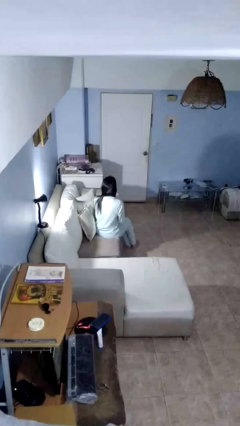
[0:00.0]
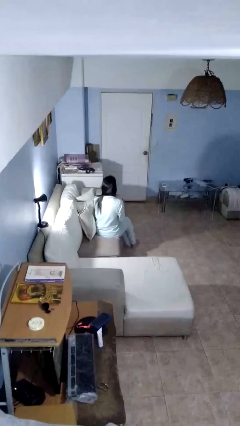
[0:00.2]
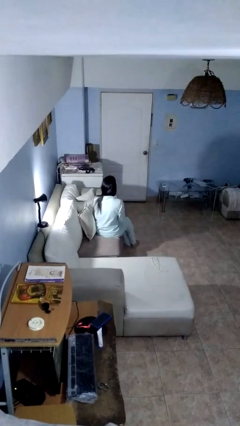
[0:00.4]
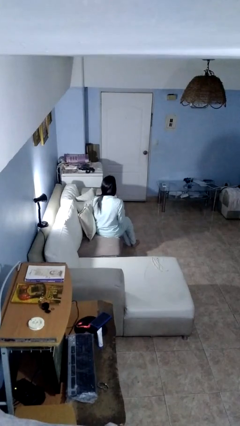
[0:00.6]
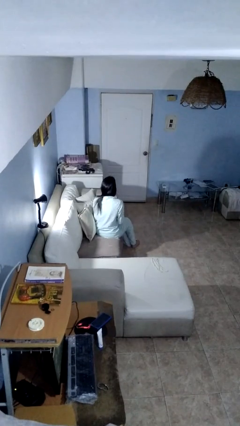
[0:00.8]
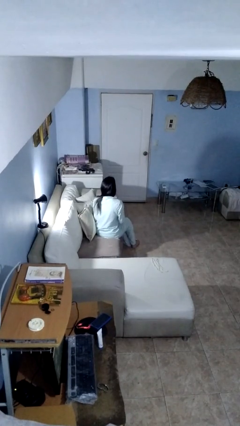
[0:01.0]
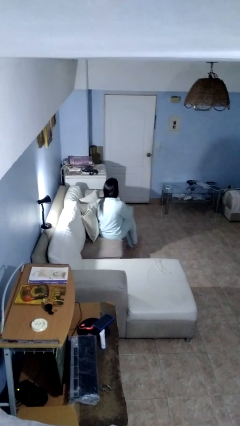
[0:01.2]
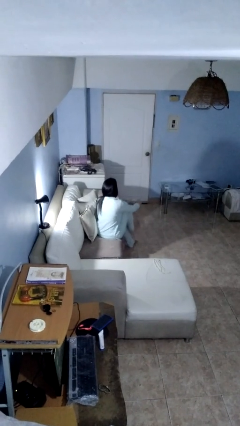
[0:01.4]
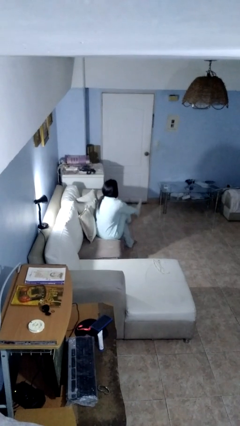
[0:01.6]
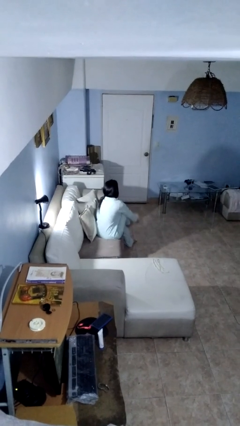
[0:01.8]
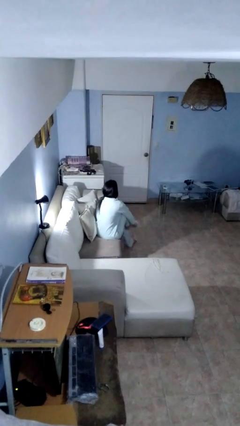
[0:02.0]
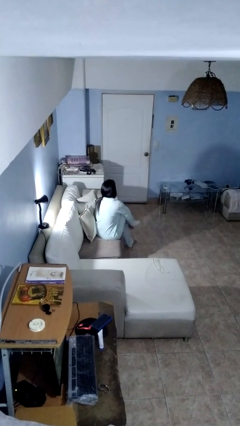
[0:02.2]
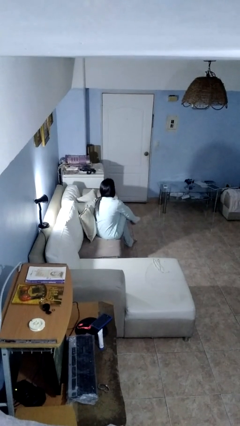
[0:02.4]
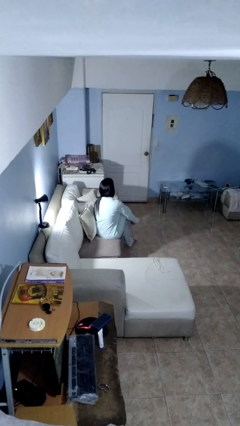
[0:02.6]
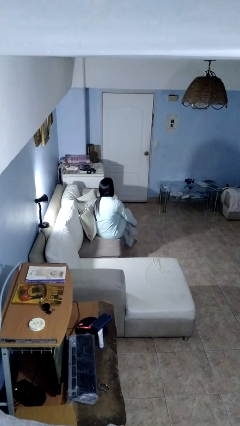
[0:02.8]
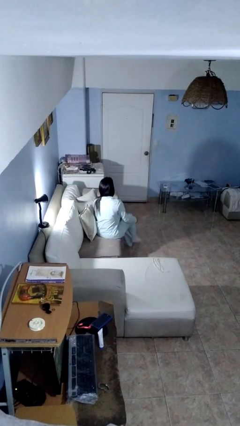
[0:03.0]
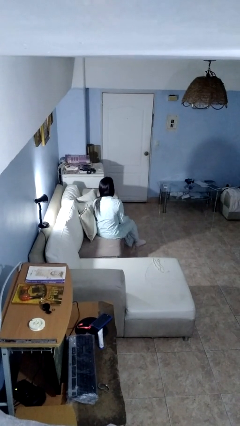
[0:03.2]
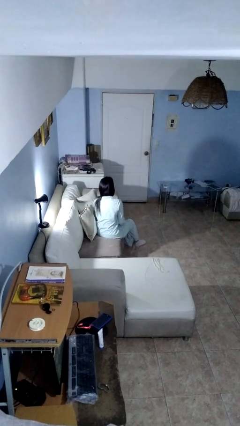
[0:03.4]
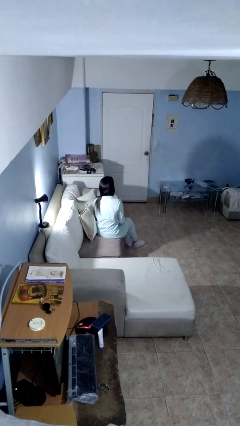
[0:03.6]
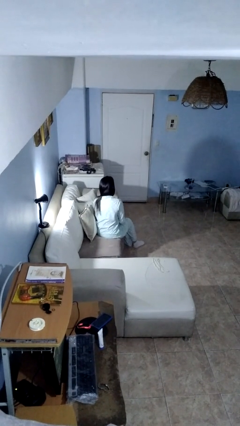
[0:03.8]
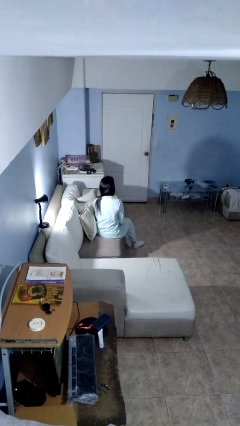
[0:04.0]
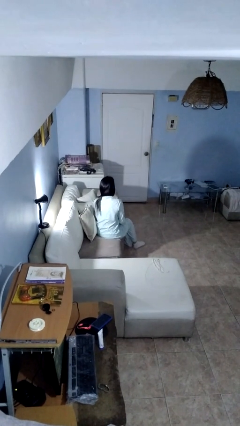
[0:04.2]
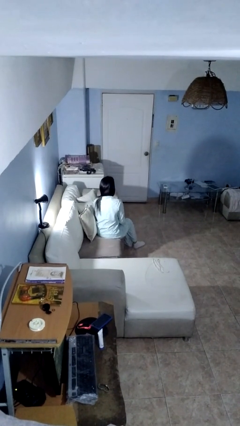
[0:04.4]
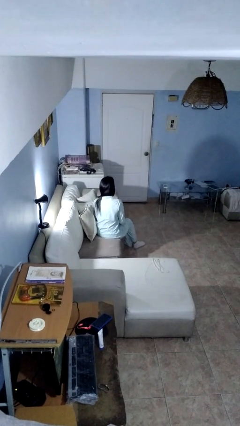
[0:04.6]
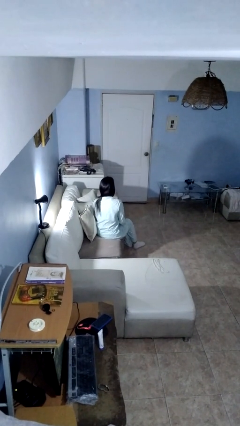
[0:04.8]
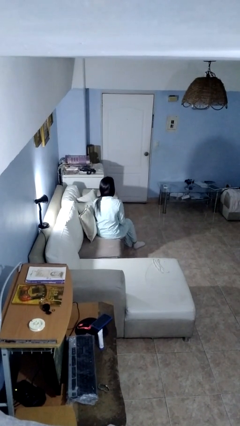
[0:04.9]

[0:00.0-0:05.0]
person puts on socks

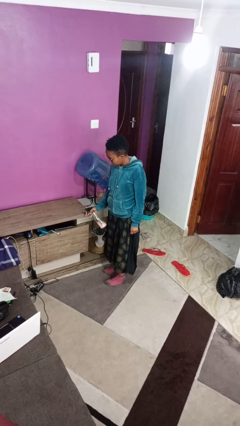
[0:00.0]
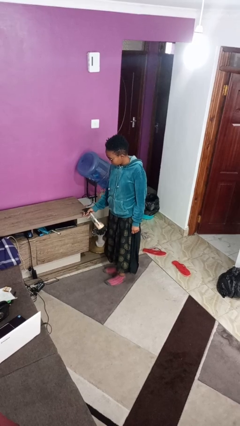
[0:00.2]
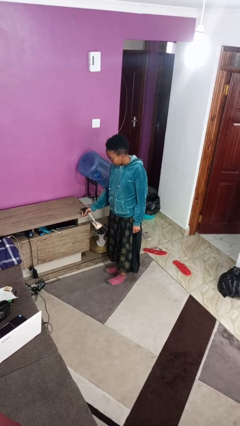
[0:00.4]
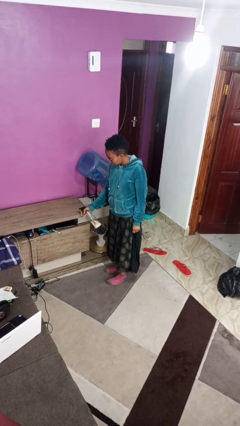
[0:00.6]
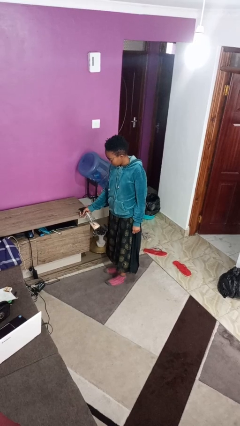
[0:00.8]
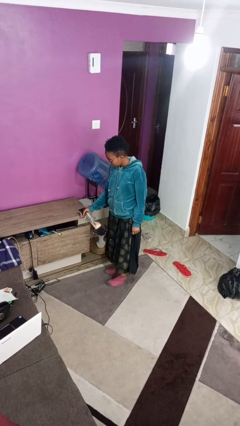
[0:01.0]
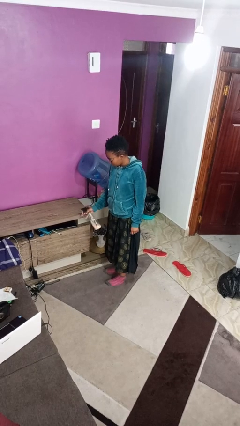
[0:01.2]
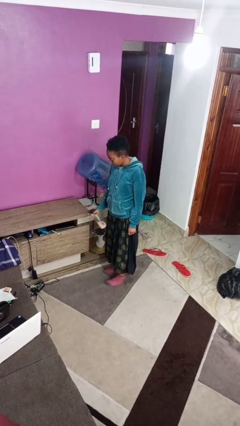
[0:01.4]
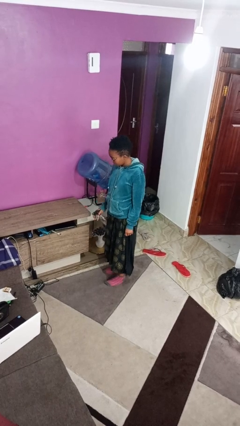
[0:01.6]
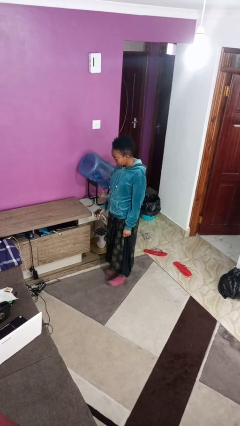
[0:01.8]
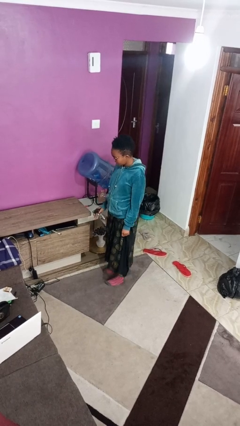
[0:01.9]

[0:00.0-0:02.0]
person sprays from bottle

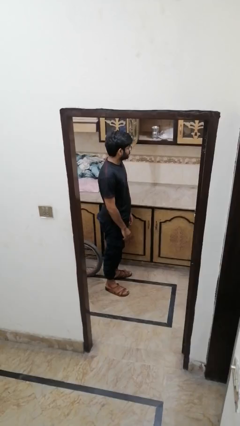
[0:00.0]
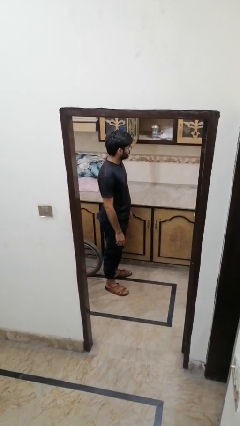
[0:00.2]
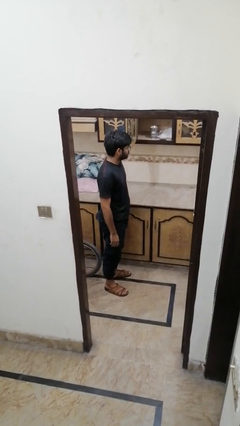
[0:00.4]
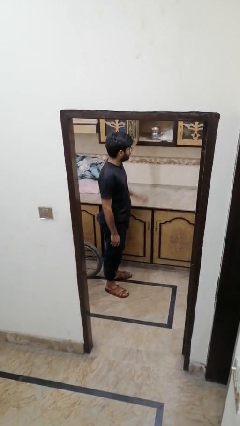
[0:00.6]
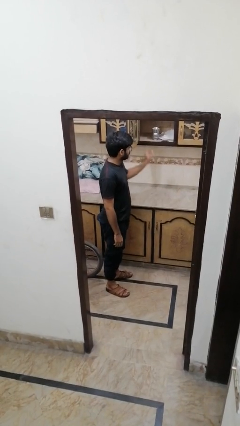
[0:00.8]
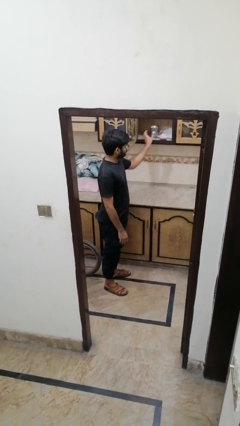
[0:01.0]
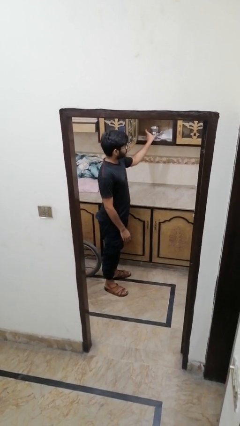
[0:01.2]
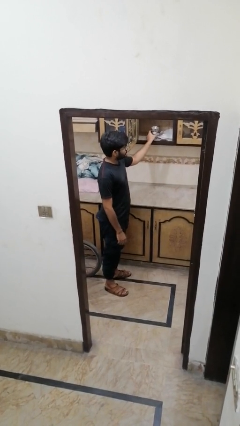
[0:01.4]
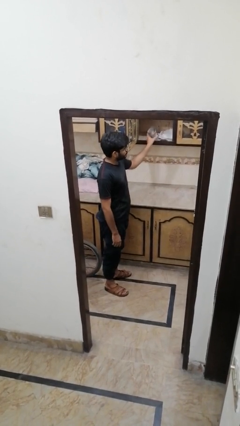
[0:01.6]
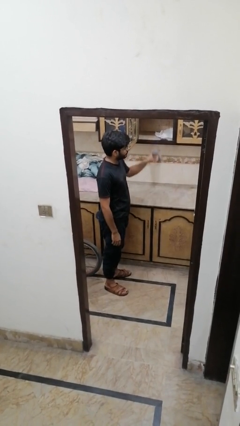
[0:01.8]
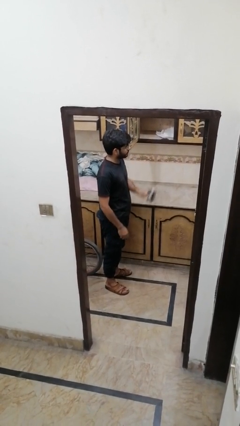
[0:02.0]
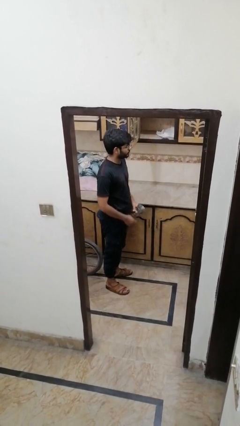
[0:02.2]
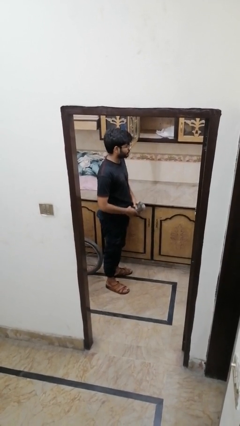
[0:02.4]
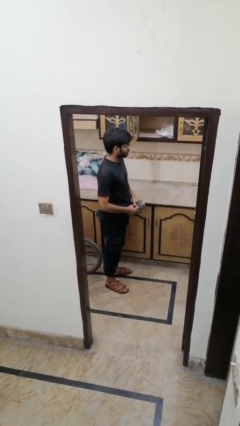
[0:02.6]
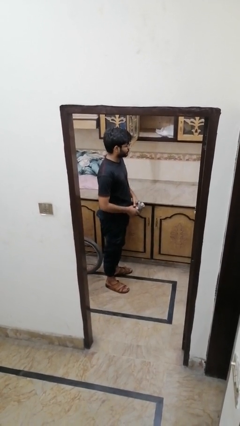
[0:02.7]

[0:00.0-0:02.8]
person picks up object from cabinet

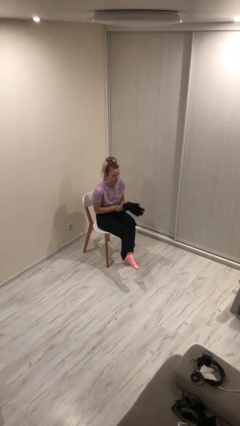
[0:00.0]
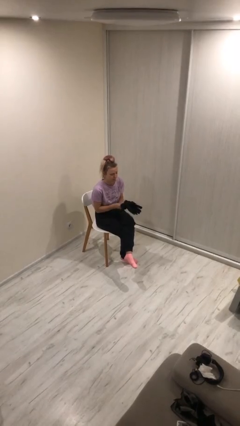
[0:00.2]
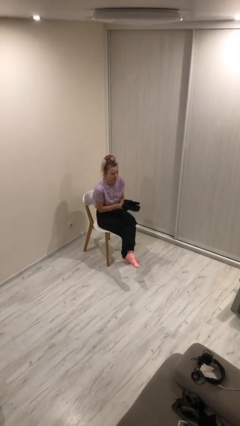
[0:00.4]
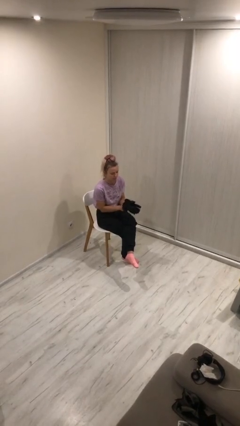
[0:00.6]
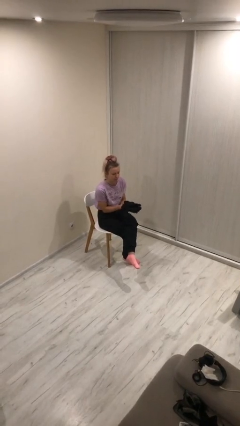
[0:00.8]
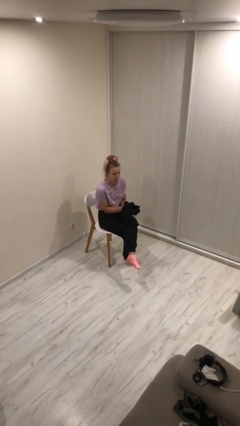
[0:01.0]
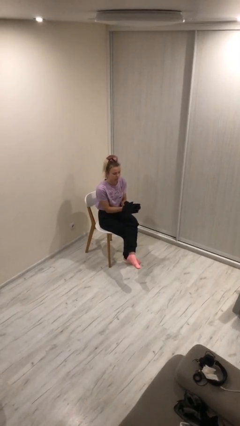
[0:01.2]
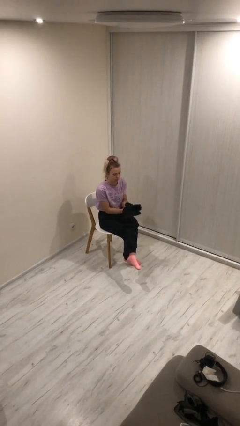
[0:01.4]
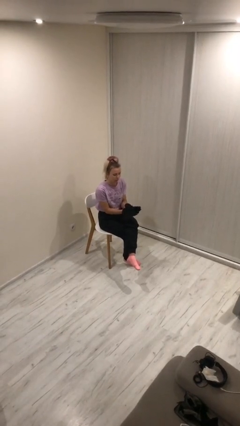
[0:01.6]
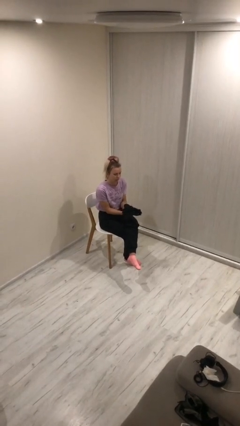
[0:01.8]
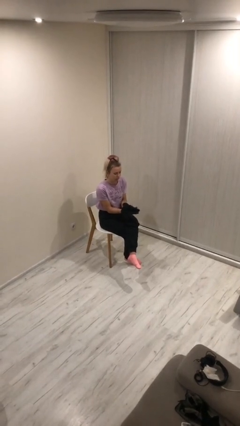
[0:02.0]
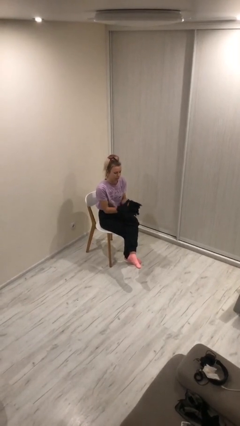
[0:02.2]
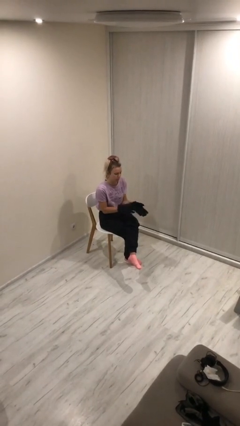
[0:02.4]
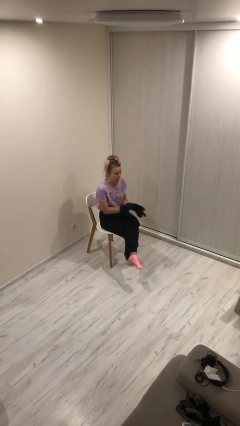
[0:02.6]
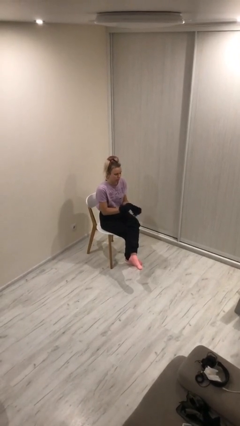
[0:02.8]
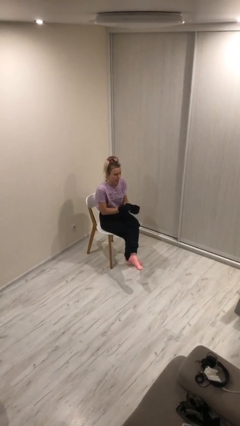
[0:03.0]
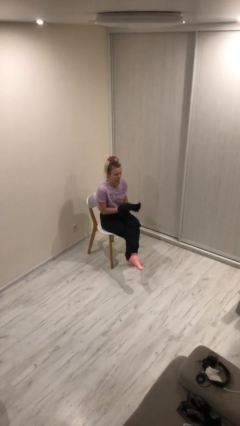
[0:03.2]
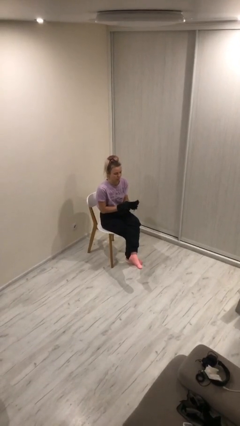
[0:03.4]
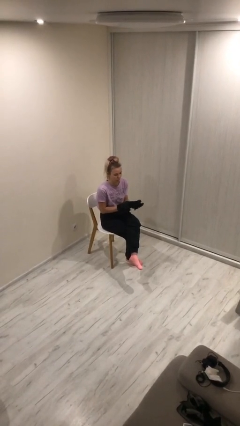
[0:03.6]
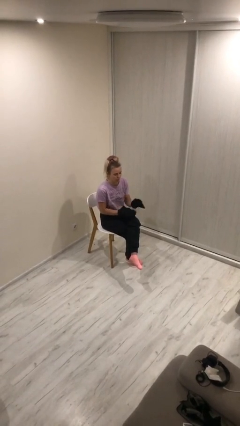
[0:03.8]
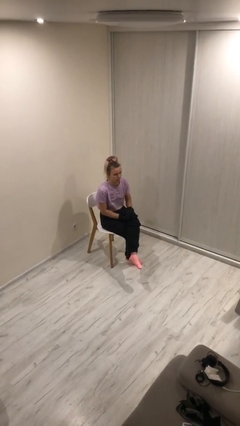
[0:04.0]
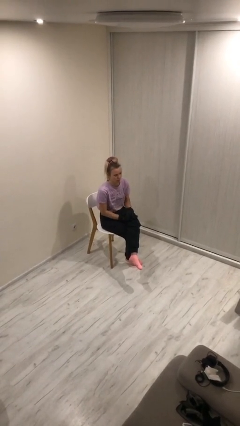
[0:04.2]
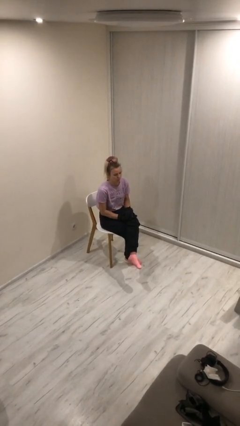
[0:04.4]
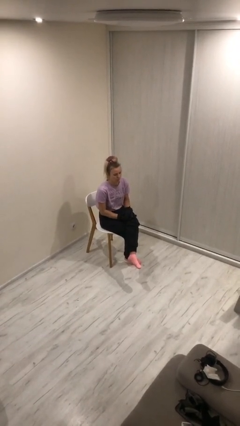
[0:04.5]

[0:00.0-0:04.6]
person puts on gloves

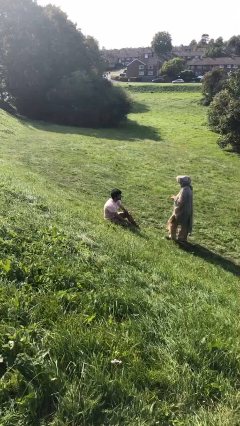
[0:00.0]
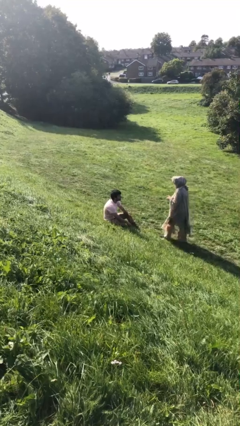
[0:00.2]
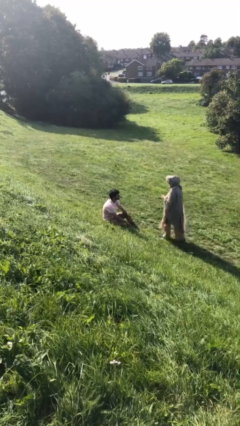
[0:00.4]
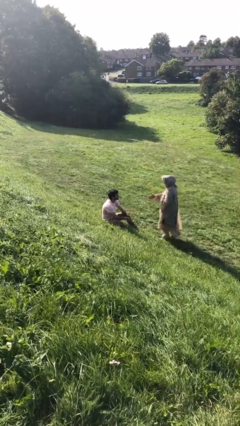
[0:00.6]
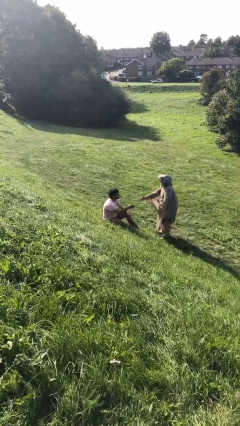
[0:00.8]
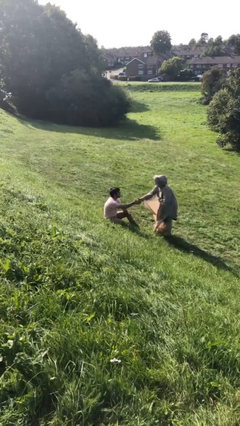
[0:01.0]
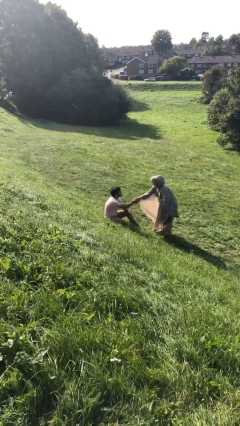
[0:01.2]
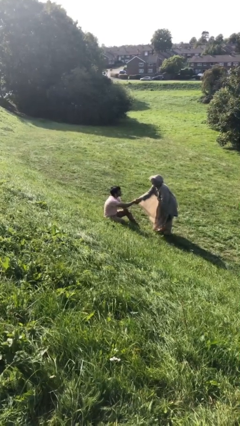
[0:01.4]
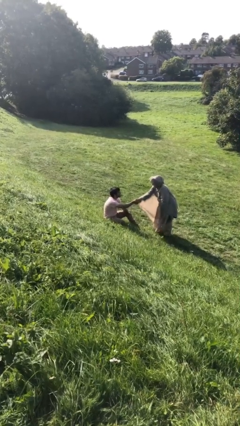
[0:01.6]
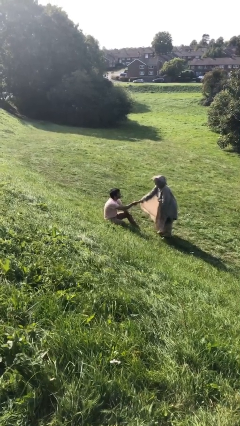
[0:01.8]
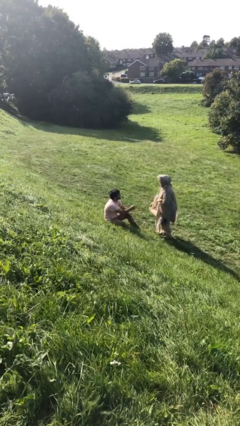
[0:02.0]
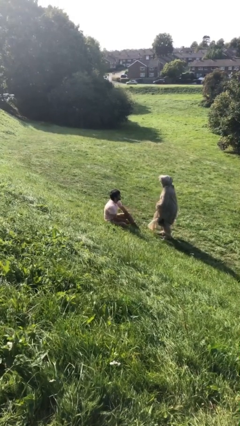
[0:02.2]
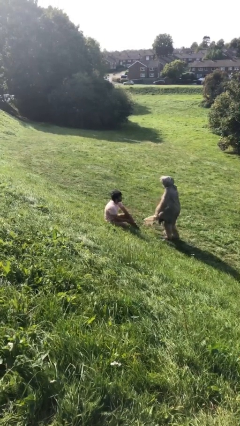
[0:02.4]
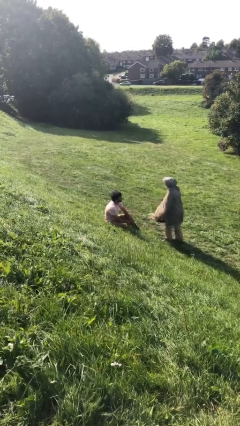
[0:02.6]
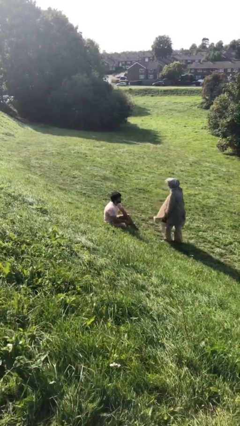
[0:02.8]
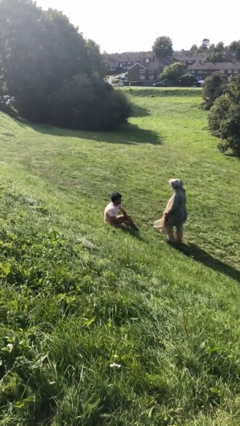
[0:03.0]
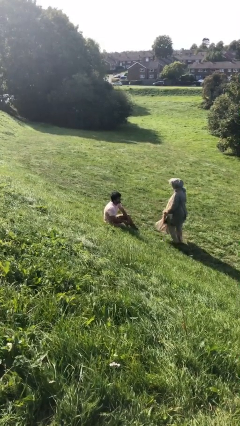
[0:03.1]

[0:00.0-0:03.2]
person shakes hand
